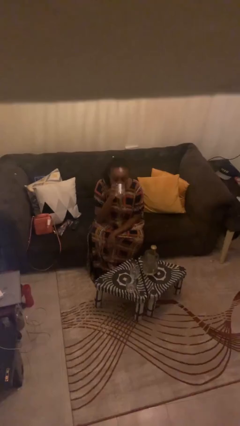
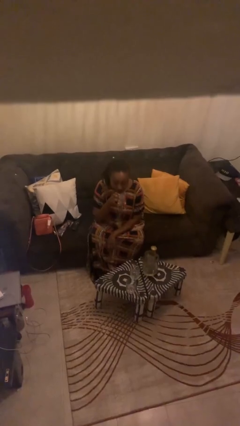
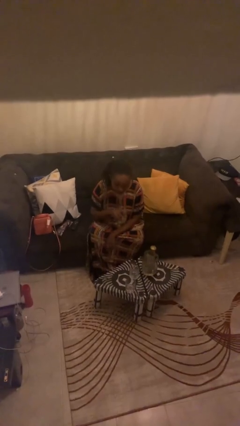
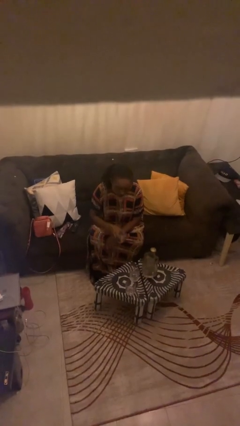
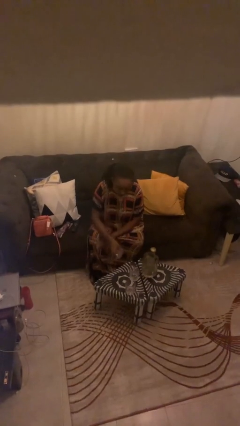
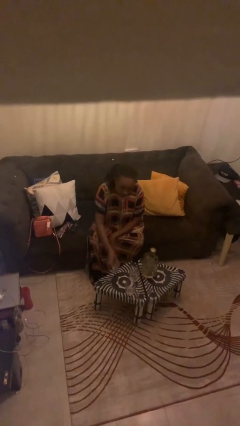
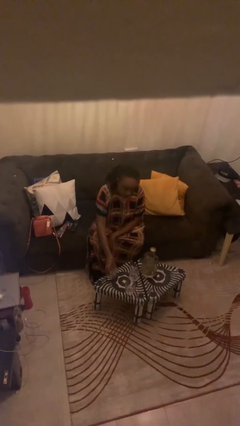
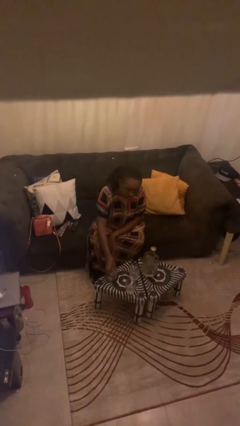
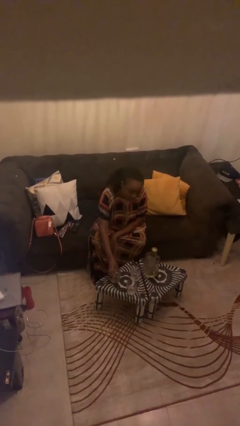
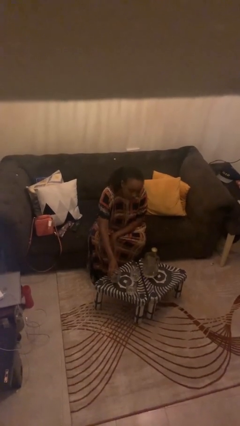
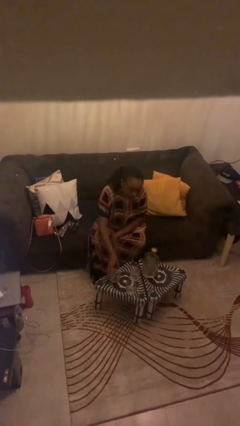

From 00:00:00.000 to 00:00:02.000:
person puts down object on table

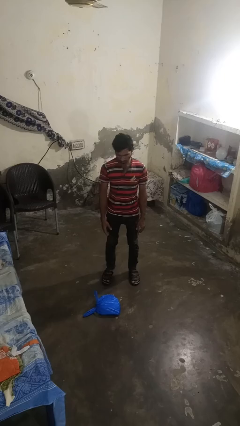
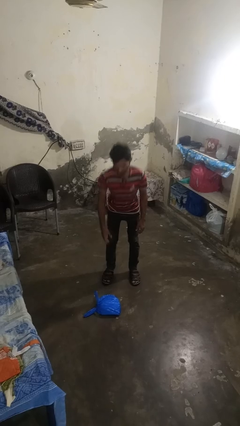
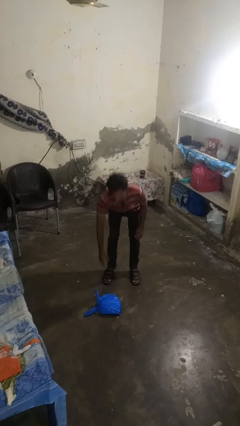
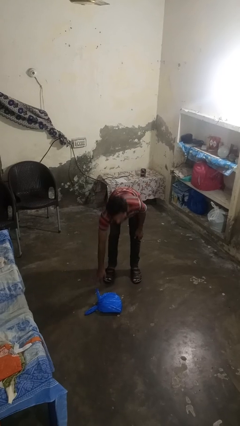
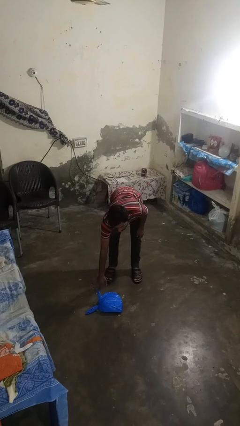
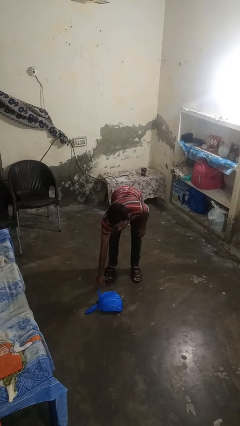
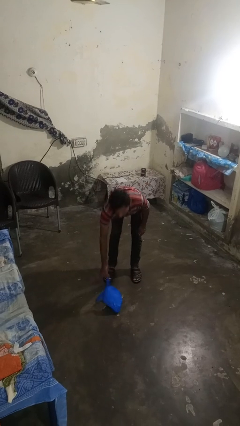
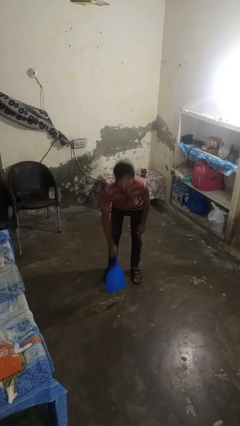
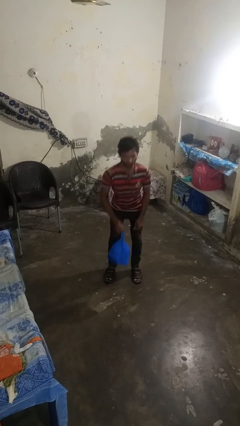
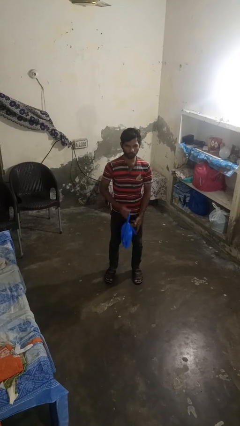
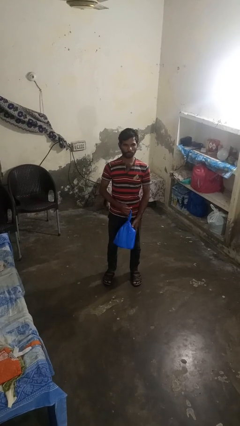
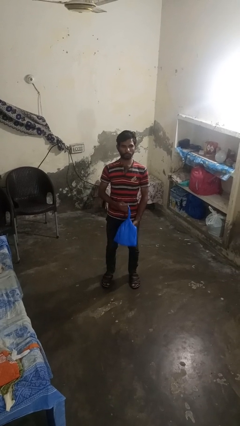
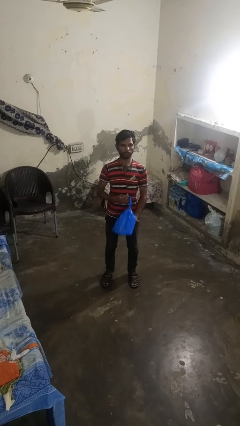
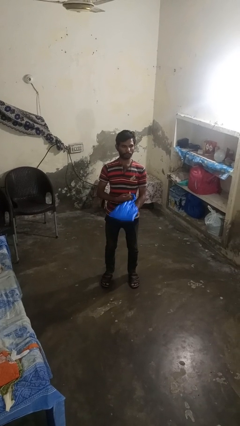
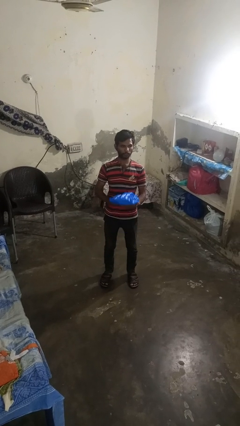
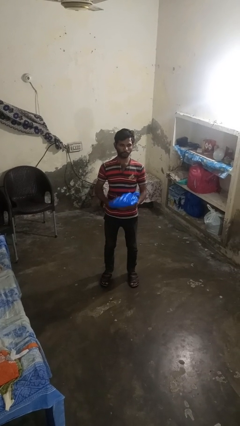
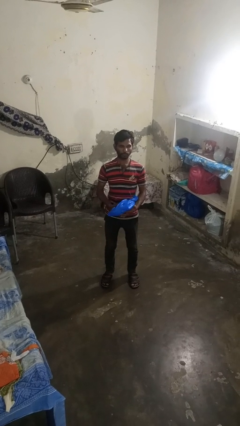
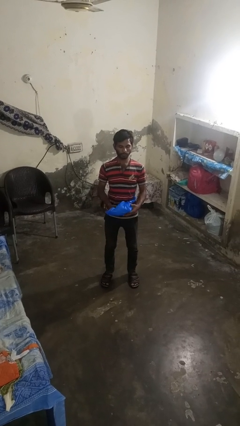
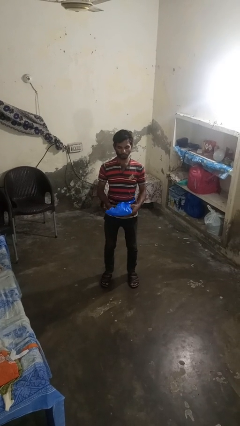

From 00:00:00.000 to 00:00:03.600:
person picks up object from floor

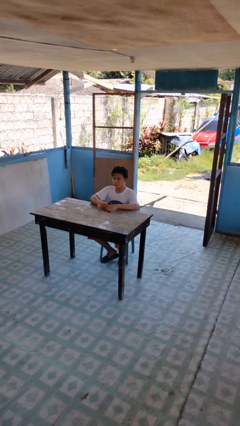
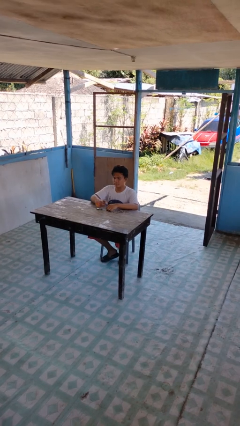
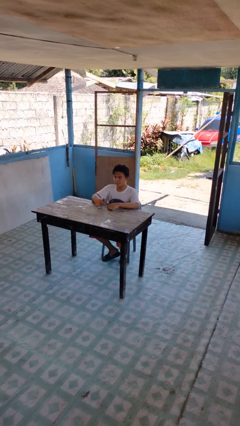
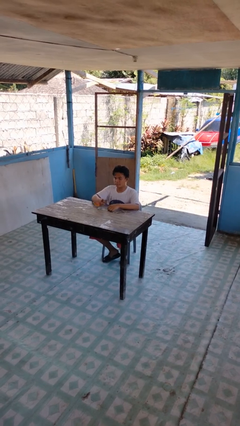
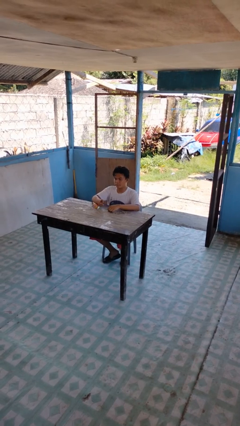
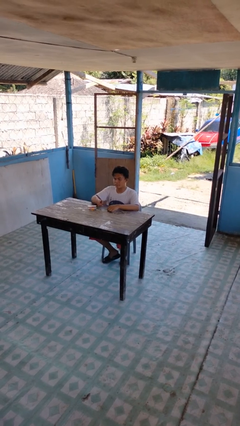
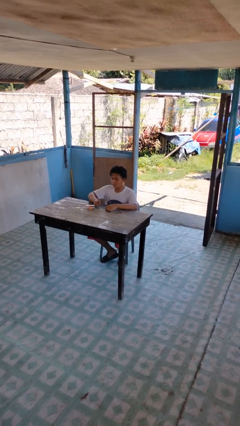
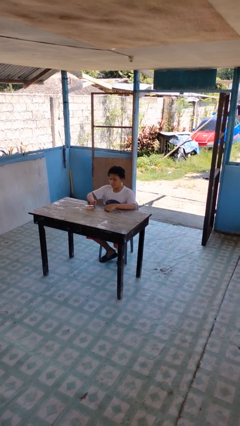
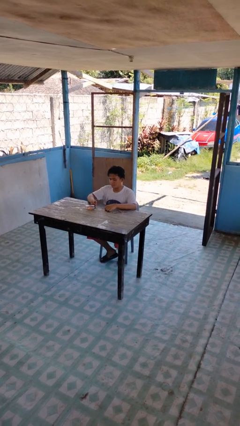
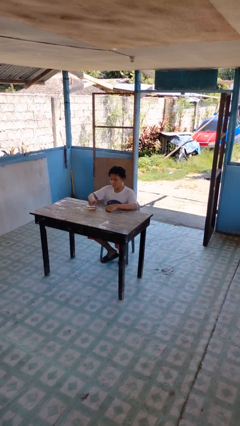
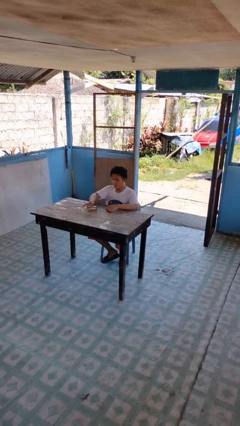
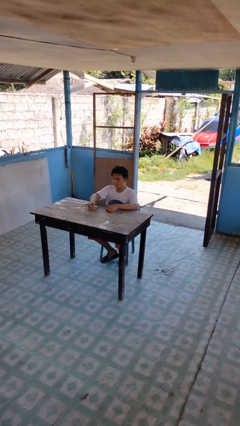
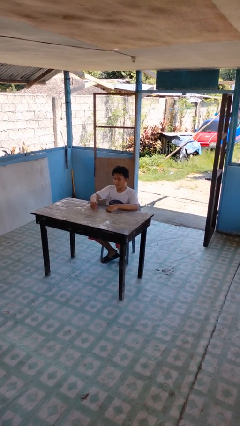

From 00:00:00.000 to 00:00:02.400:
person knocks over glass

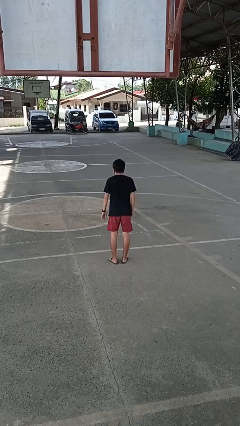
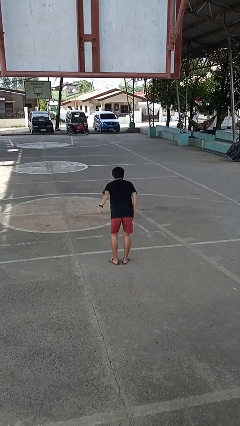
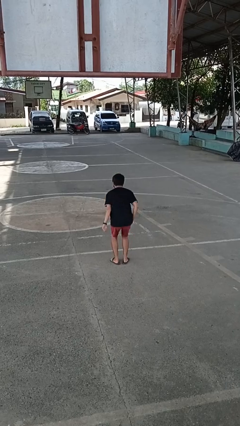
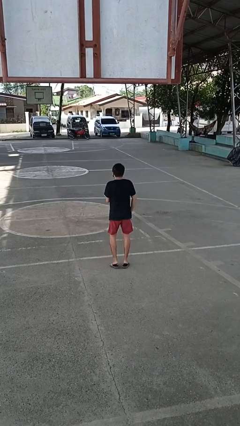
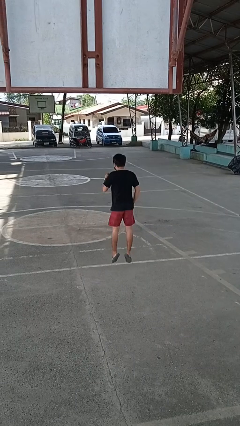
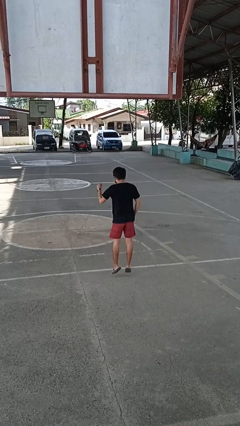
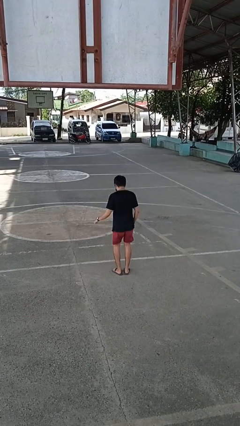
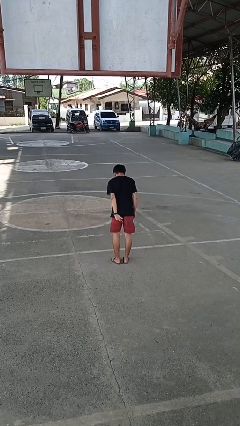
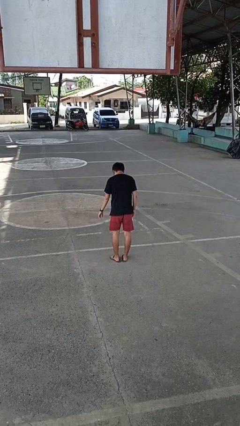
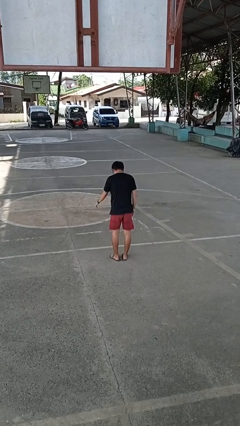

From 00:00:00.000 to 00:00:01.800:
person jumps

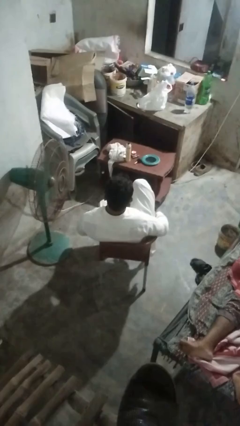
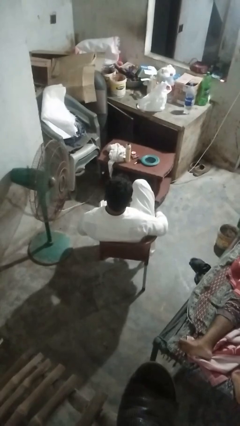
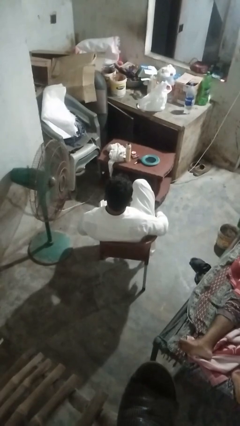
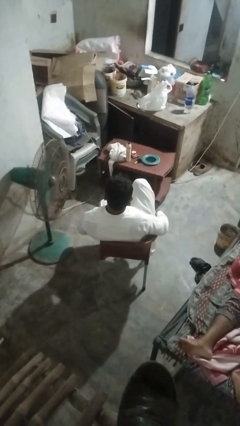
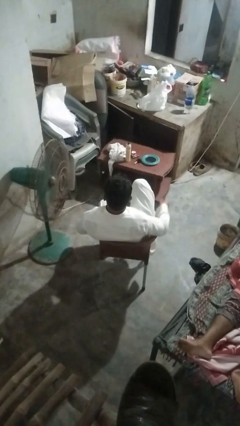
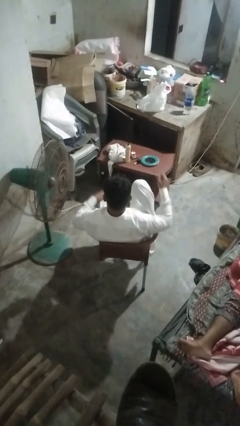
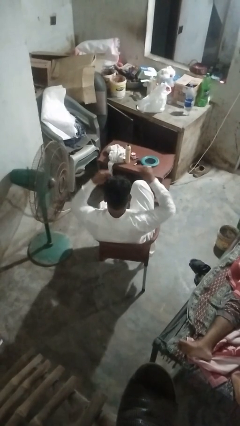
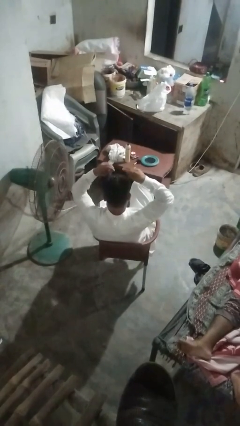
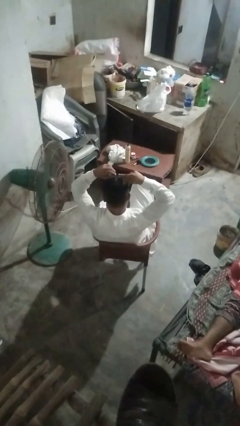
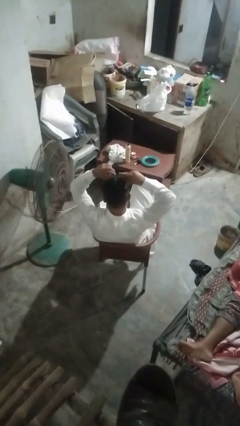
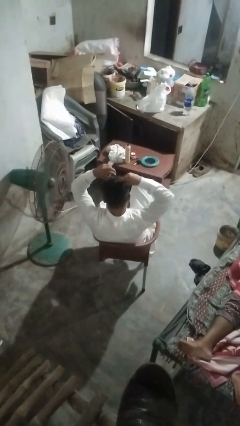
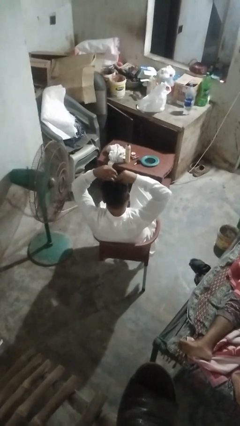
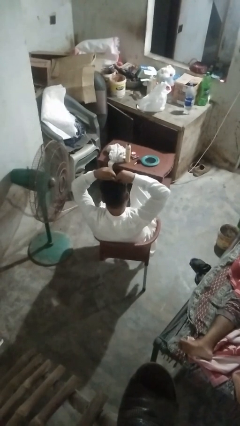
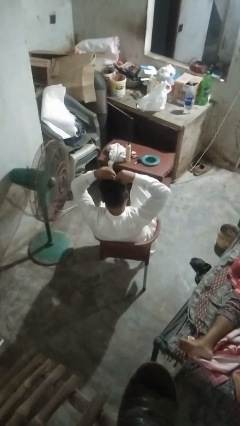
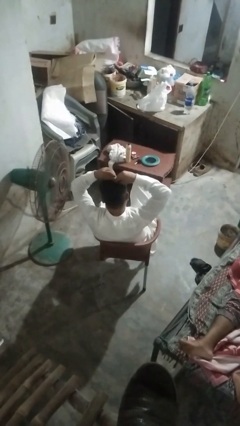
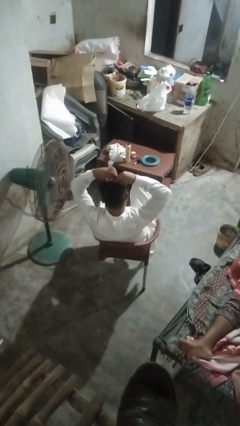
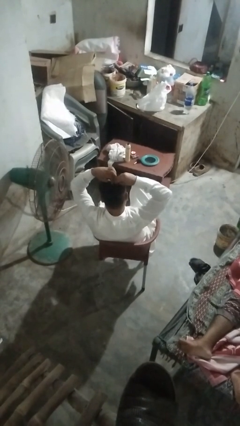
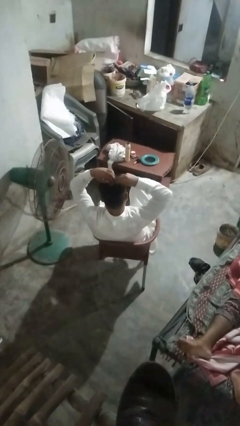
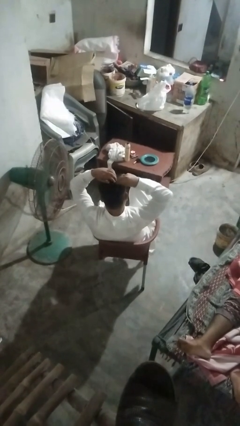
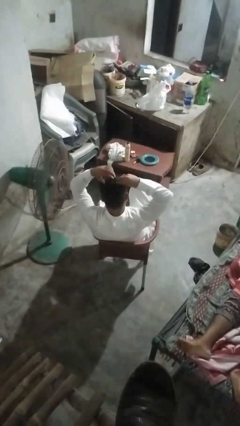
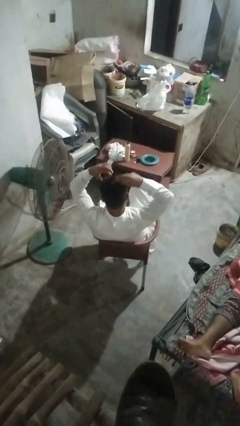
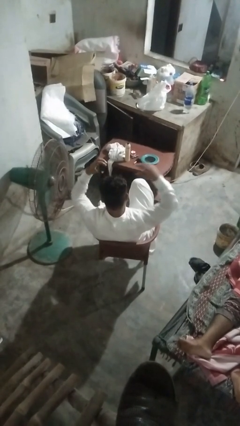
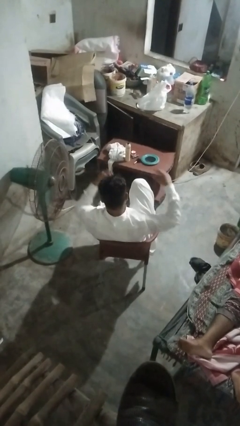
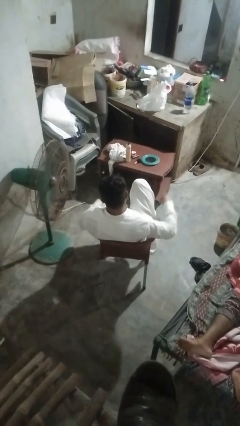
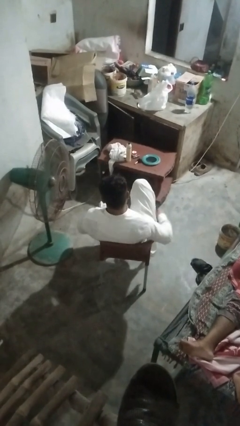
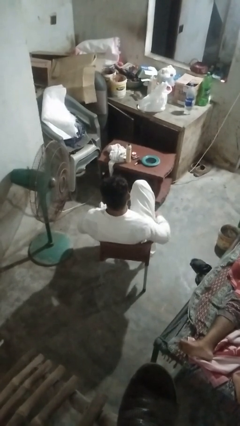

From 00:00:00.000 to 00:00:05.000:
person puts hair in ponytail

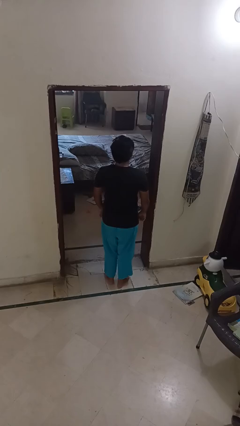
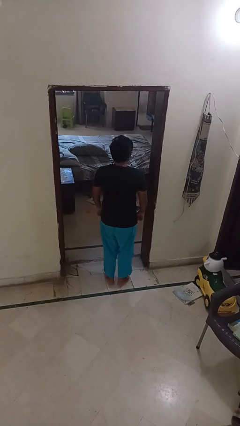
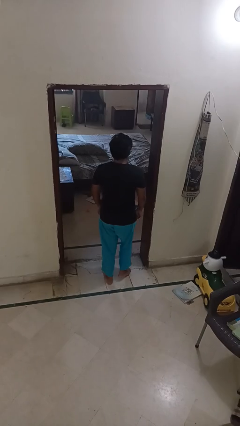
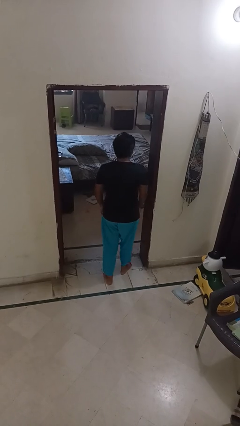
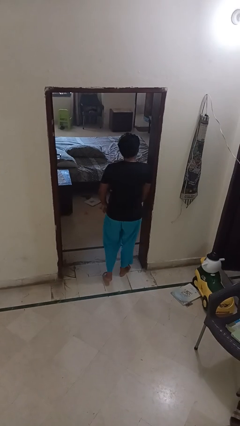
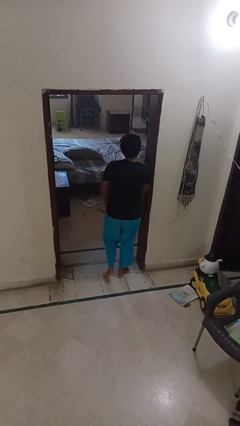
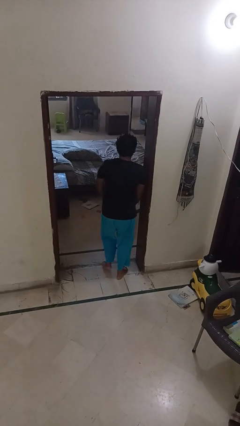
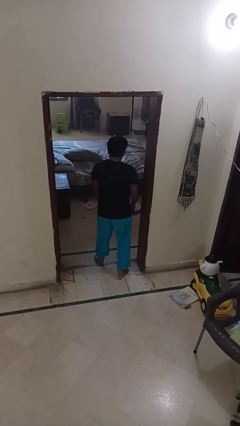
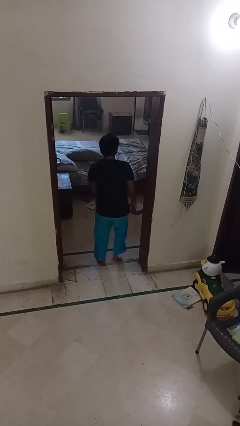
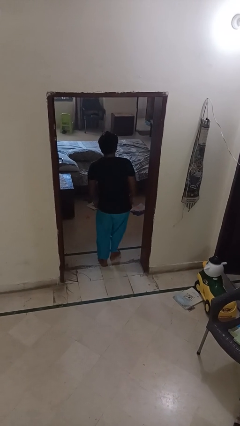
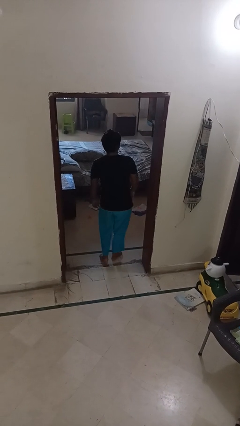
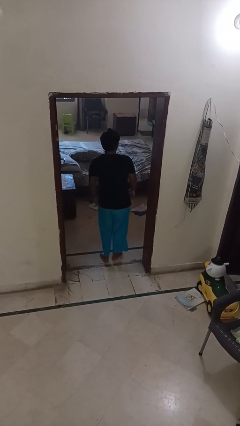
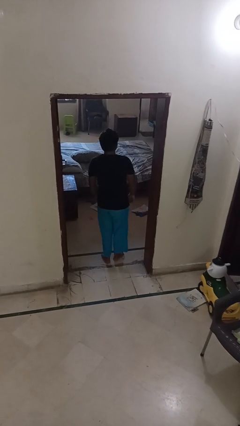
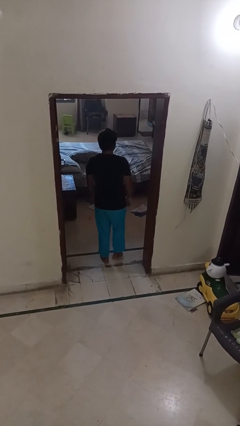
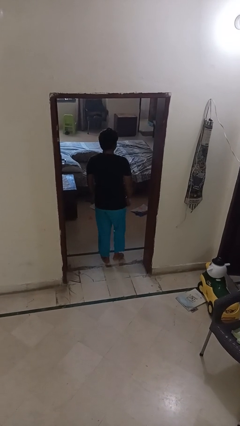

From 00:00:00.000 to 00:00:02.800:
person bumps into wall
